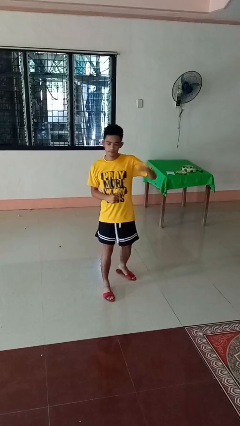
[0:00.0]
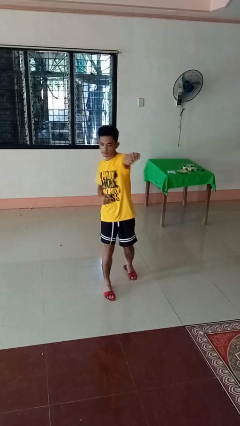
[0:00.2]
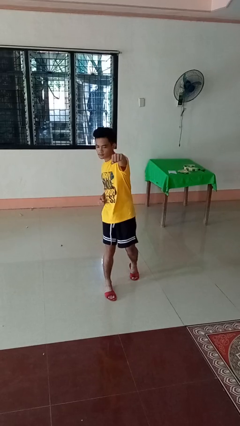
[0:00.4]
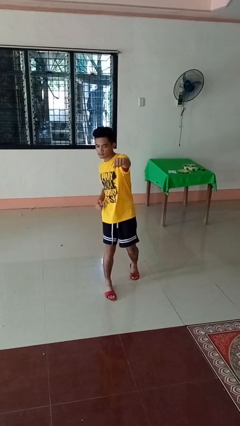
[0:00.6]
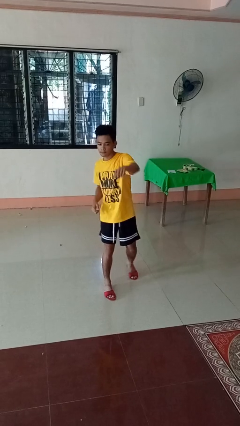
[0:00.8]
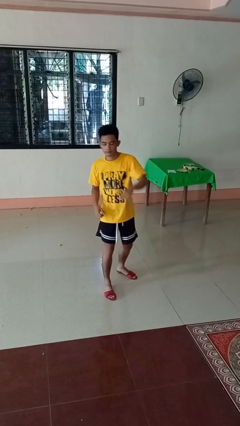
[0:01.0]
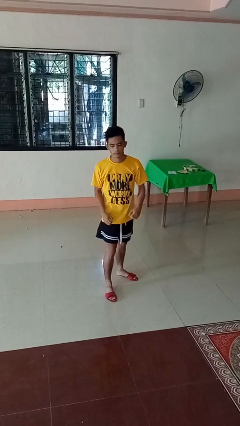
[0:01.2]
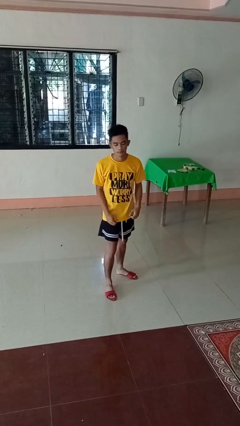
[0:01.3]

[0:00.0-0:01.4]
person punches

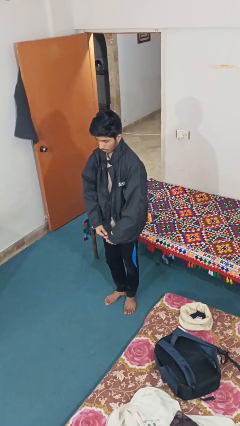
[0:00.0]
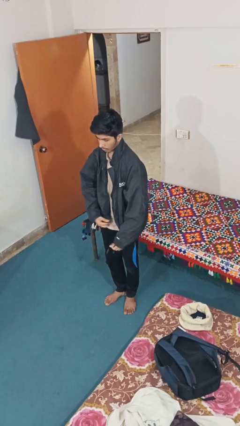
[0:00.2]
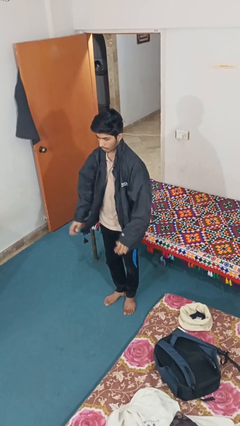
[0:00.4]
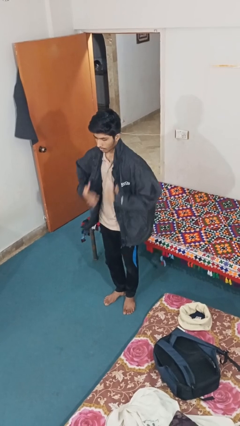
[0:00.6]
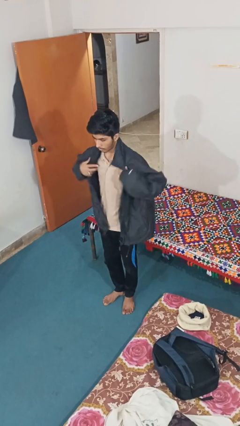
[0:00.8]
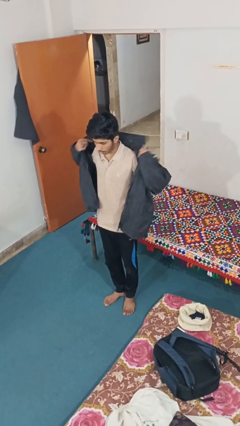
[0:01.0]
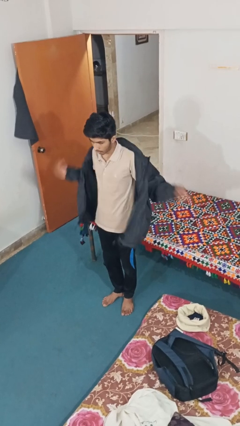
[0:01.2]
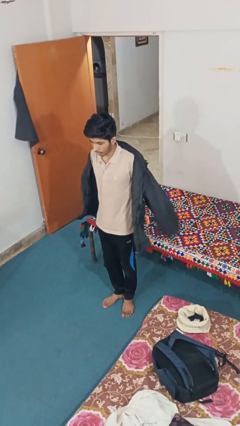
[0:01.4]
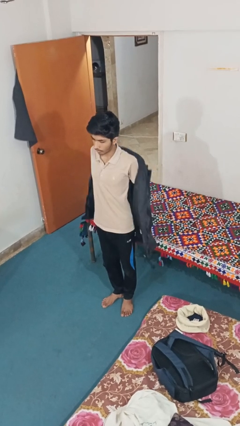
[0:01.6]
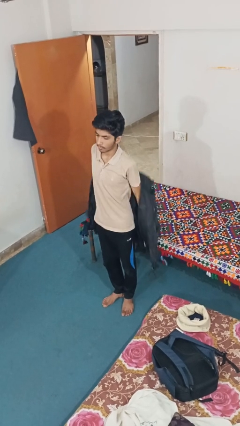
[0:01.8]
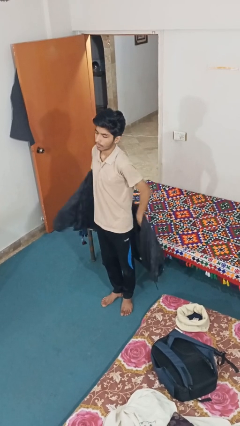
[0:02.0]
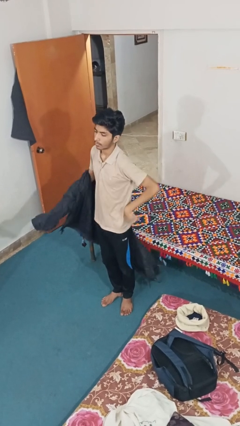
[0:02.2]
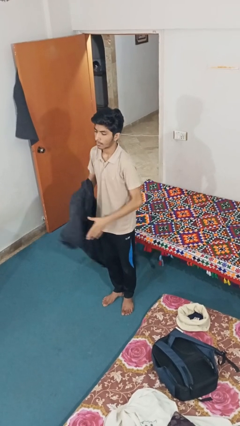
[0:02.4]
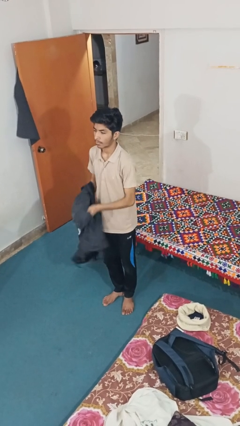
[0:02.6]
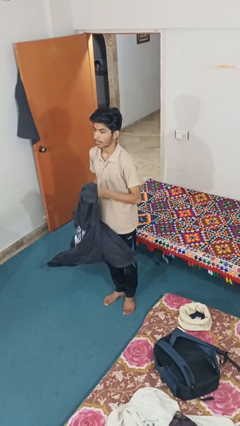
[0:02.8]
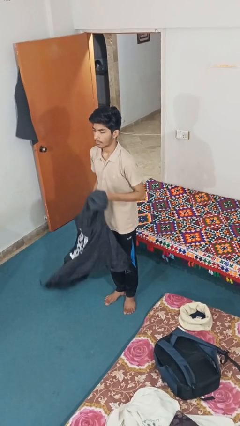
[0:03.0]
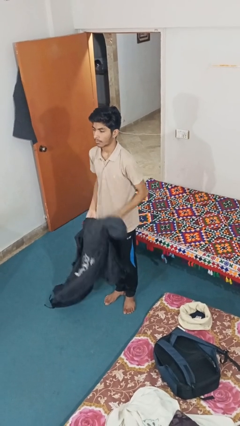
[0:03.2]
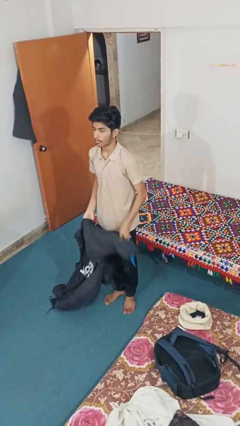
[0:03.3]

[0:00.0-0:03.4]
person takes off jacket

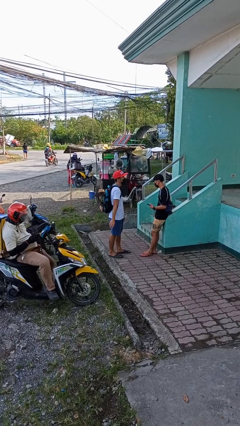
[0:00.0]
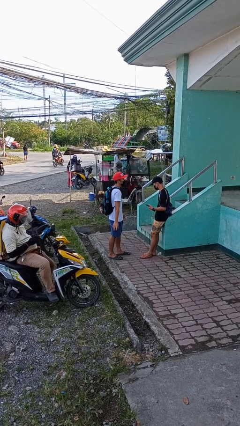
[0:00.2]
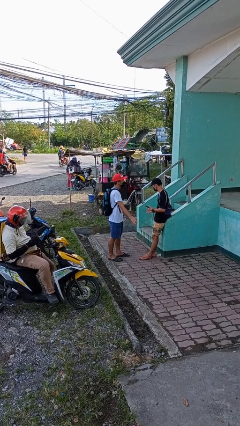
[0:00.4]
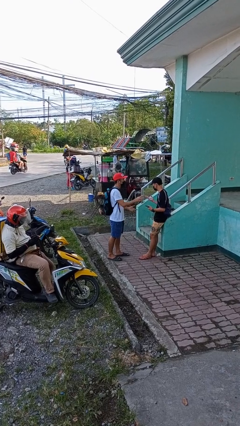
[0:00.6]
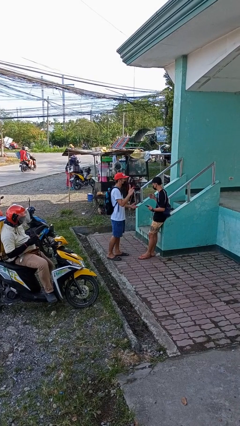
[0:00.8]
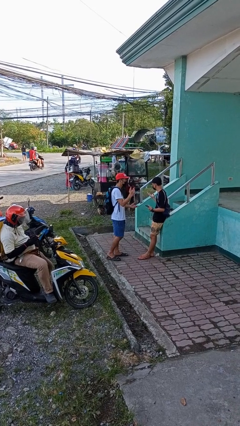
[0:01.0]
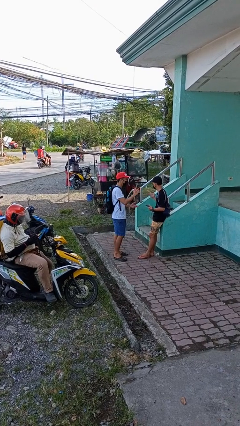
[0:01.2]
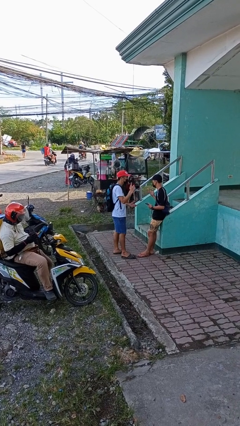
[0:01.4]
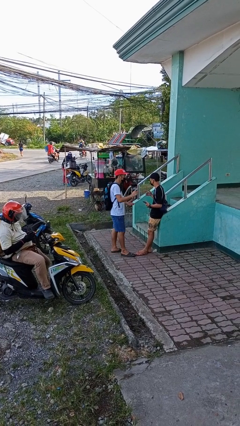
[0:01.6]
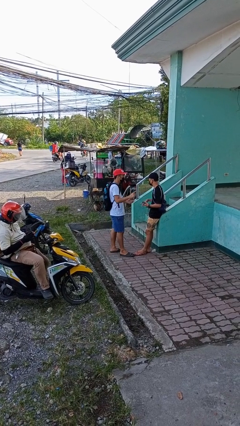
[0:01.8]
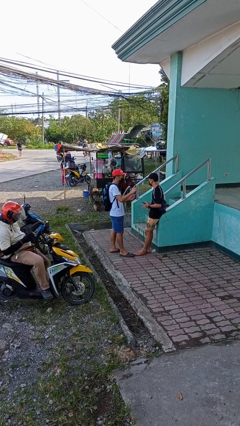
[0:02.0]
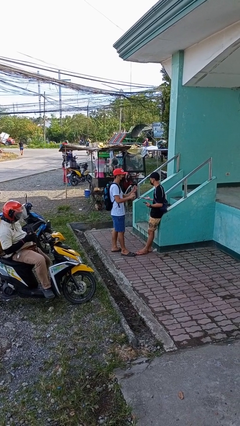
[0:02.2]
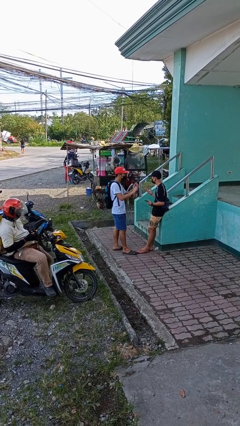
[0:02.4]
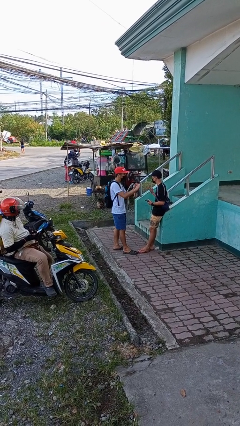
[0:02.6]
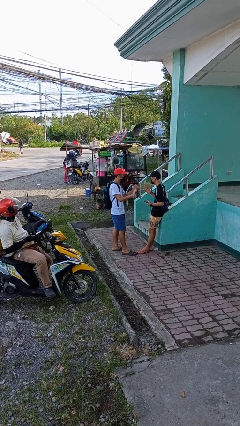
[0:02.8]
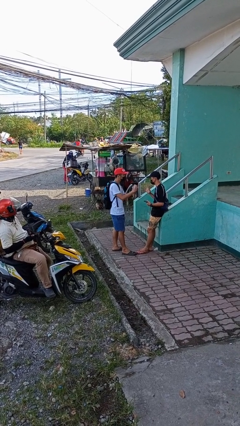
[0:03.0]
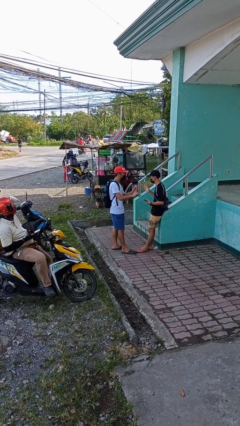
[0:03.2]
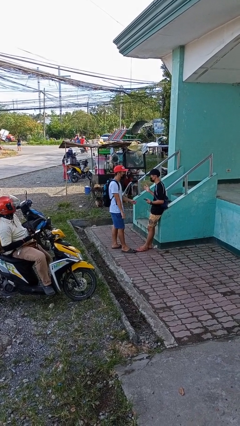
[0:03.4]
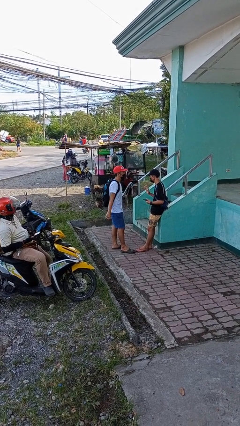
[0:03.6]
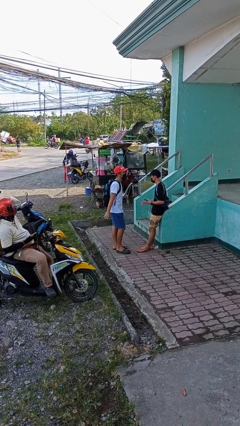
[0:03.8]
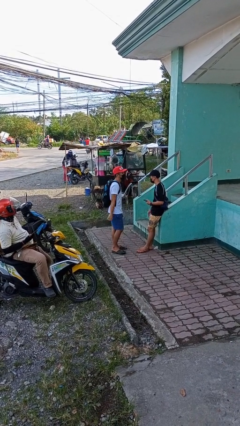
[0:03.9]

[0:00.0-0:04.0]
person talks to person

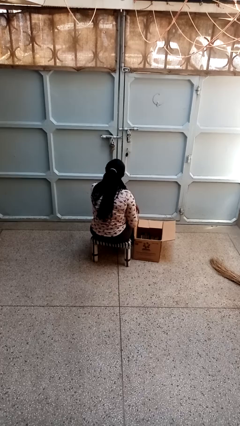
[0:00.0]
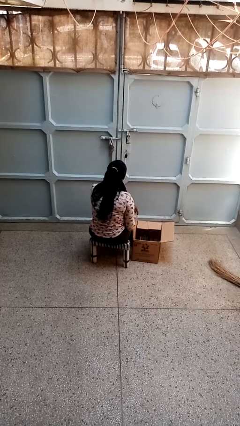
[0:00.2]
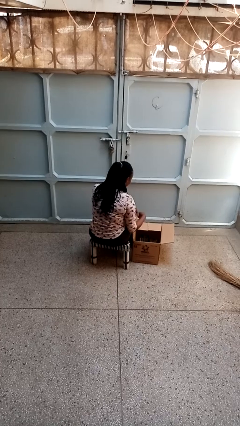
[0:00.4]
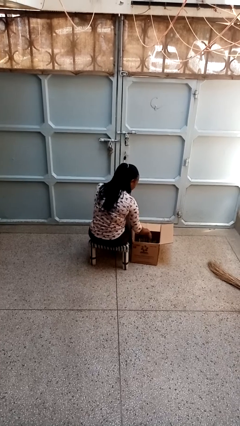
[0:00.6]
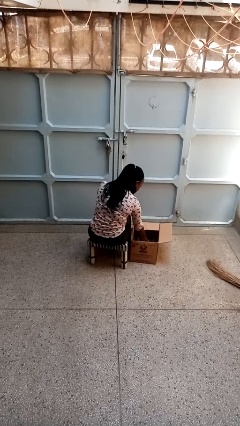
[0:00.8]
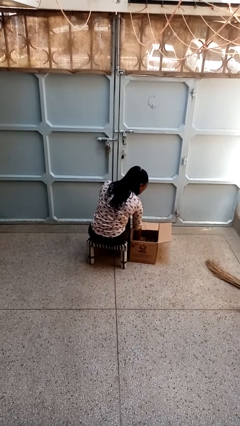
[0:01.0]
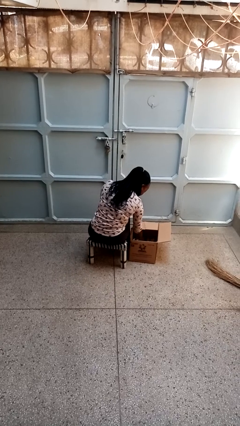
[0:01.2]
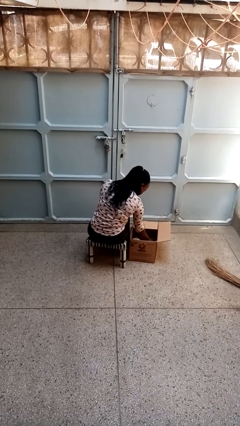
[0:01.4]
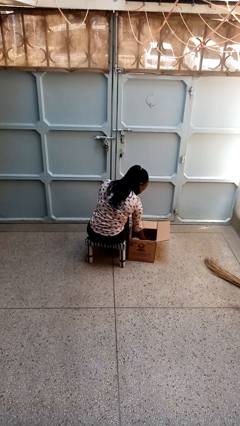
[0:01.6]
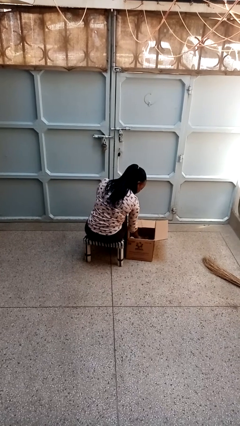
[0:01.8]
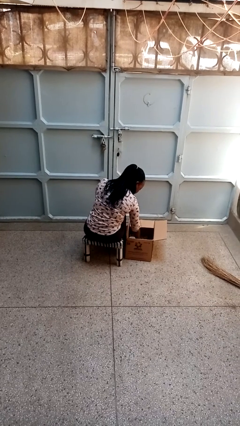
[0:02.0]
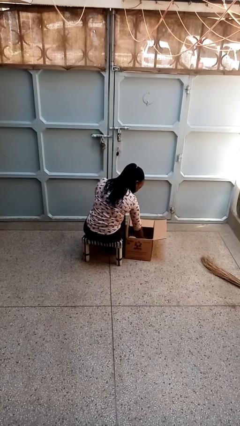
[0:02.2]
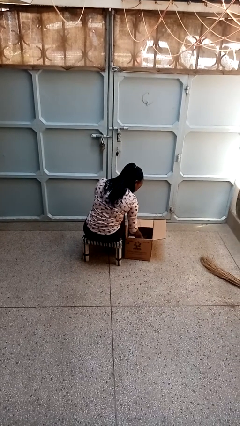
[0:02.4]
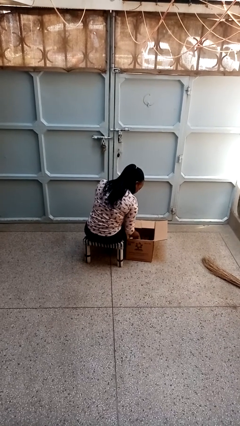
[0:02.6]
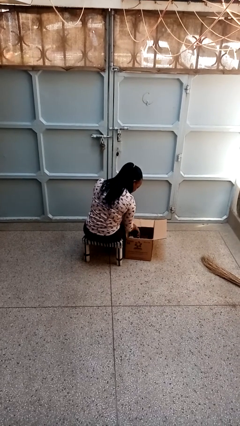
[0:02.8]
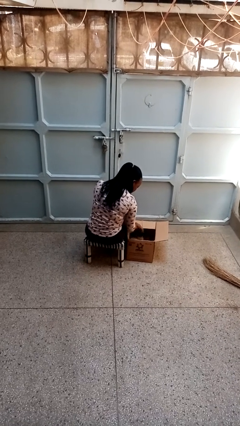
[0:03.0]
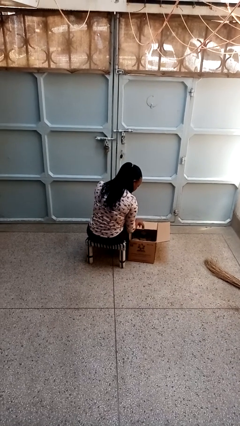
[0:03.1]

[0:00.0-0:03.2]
person searches in box

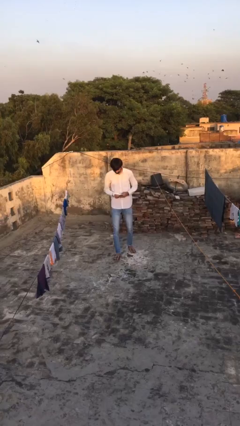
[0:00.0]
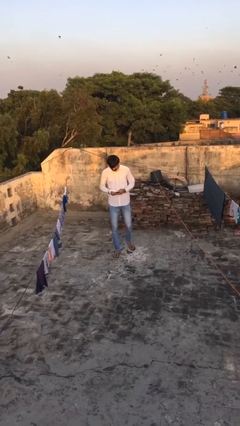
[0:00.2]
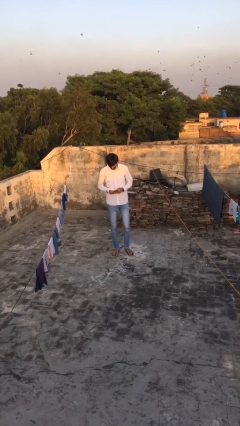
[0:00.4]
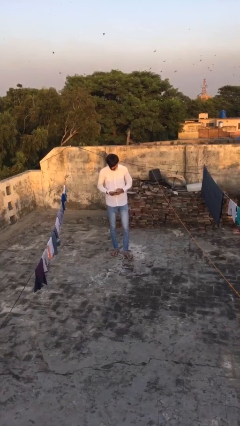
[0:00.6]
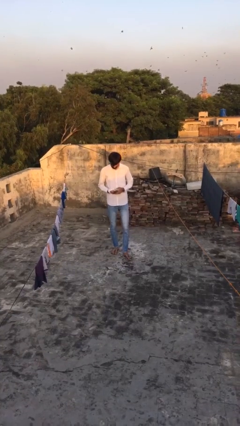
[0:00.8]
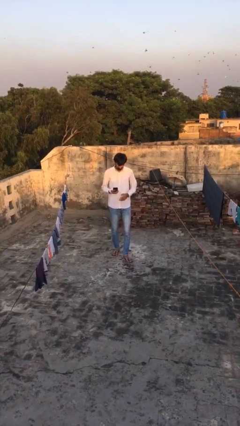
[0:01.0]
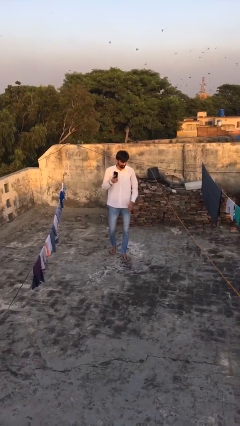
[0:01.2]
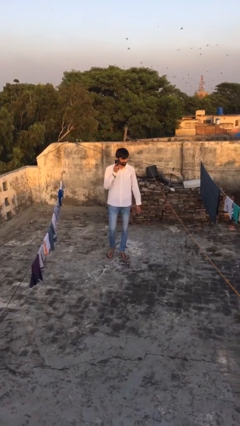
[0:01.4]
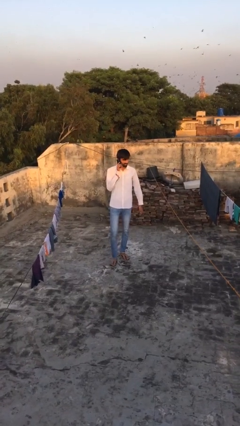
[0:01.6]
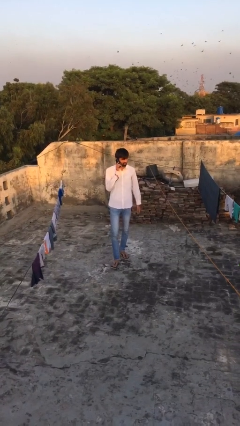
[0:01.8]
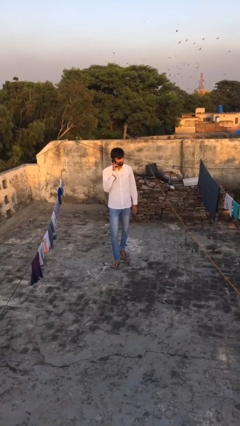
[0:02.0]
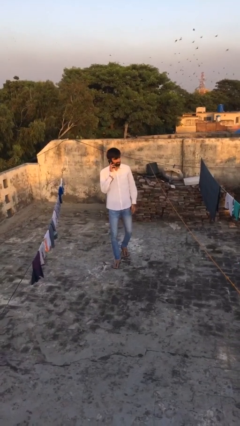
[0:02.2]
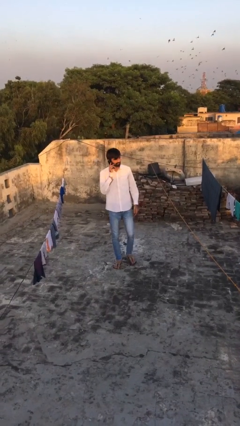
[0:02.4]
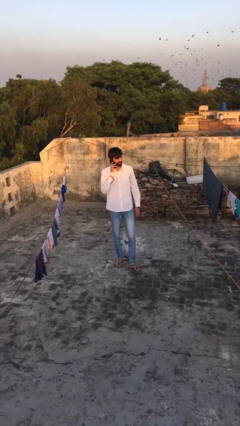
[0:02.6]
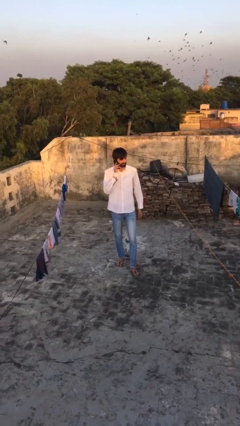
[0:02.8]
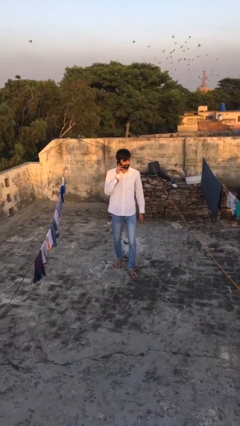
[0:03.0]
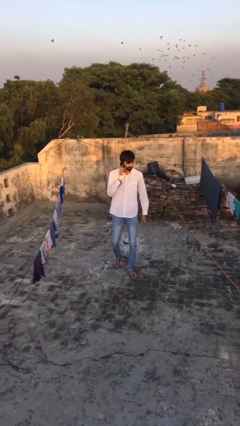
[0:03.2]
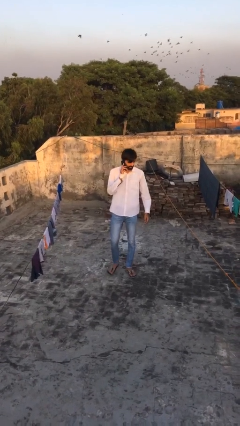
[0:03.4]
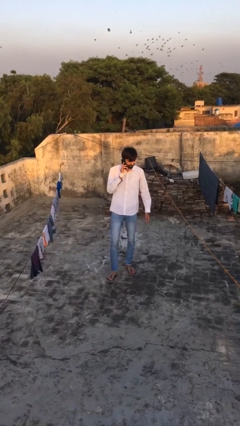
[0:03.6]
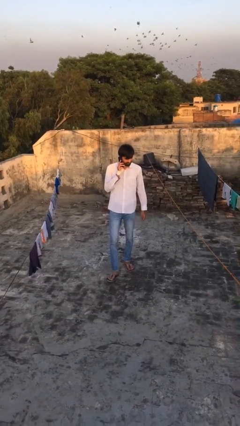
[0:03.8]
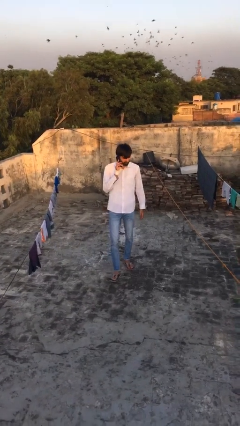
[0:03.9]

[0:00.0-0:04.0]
person talks on phone

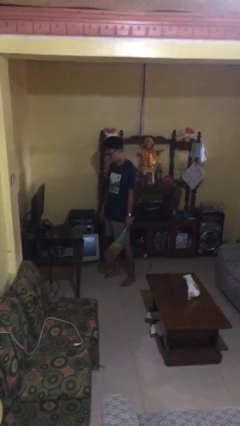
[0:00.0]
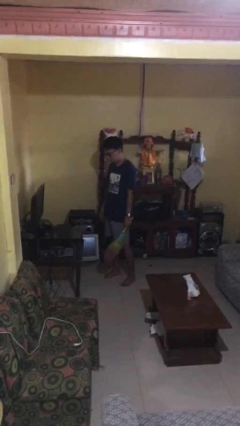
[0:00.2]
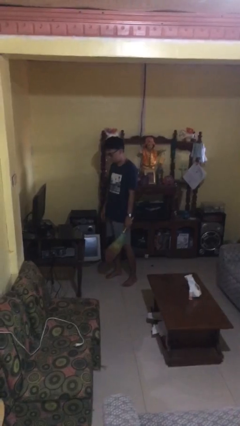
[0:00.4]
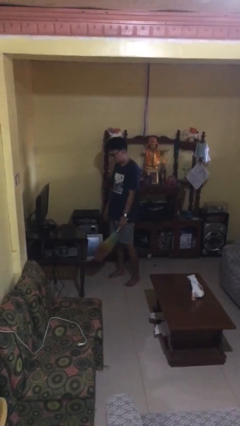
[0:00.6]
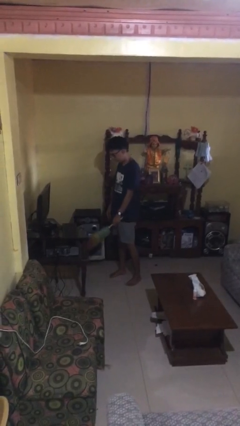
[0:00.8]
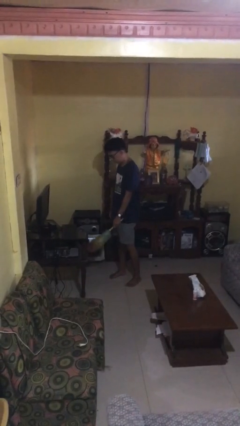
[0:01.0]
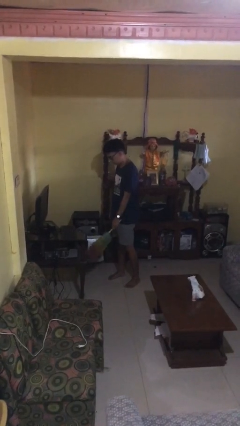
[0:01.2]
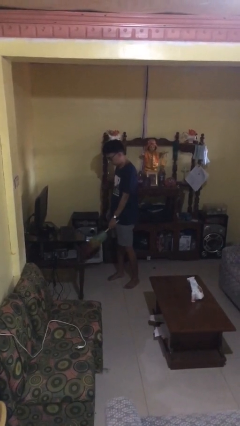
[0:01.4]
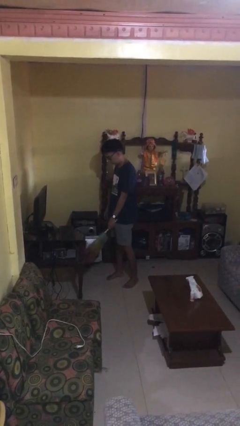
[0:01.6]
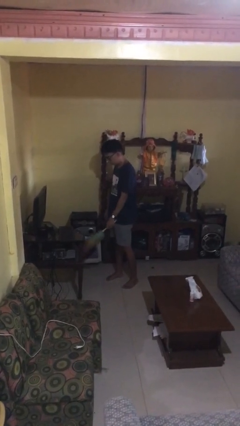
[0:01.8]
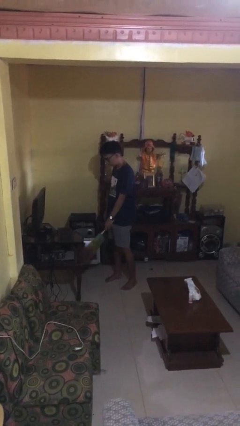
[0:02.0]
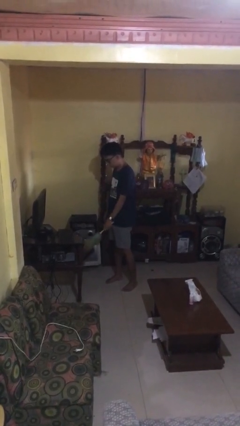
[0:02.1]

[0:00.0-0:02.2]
person dusts furniture
